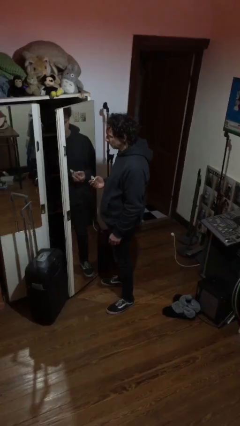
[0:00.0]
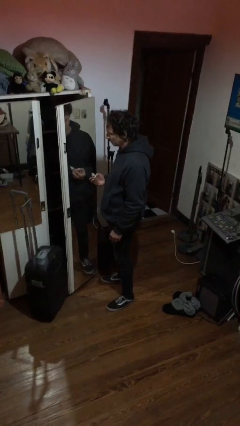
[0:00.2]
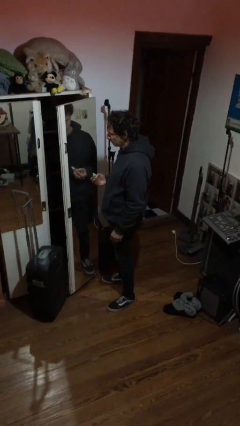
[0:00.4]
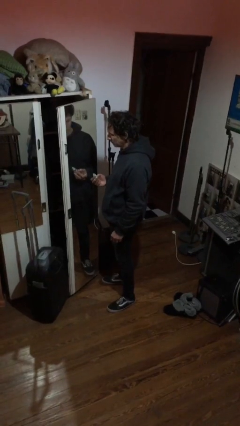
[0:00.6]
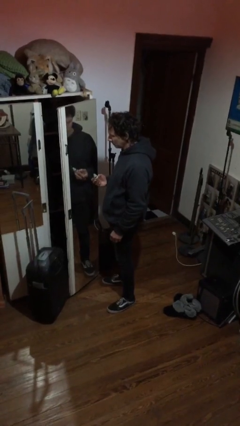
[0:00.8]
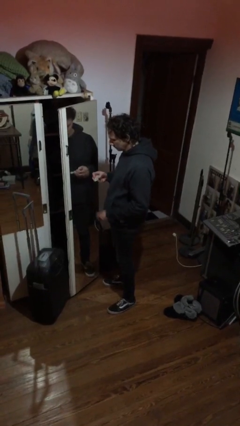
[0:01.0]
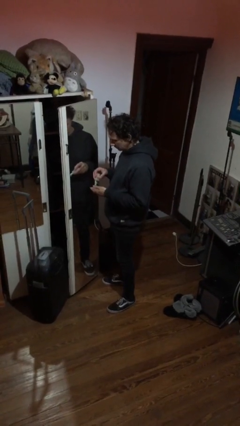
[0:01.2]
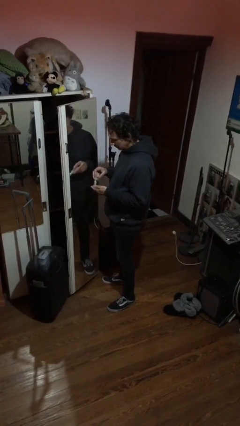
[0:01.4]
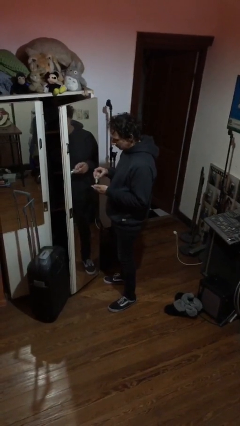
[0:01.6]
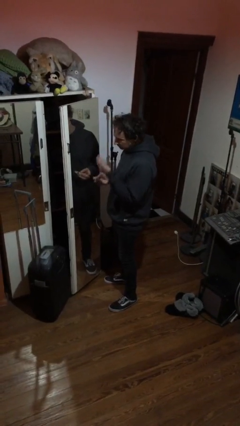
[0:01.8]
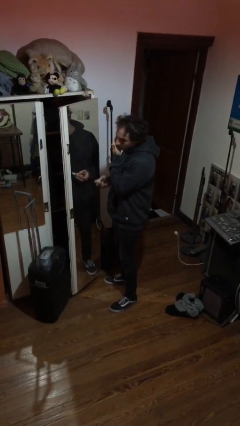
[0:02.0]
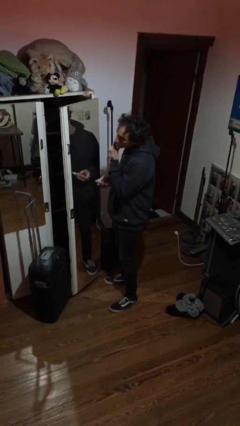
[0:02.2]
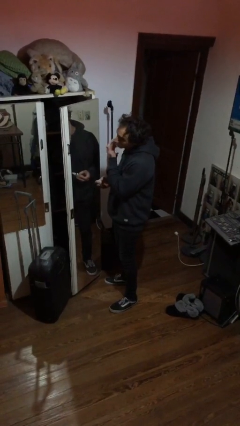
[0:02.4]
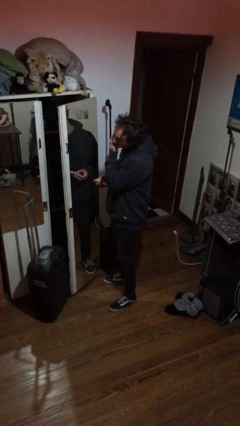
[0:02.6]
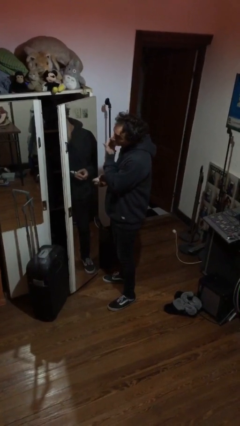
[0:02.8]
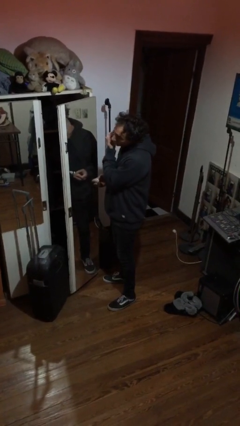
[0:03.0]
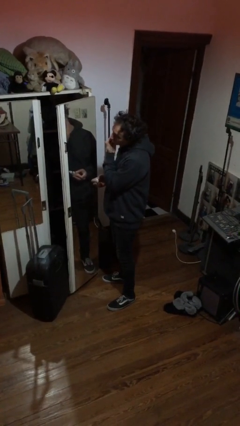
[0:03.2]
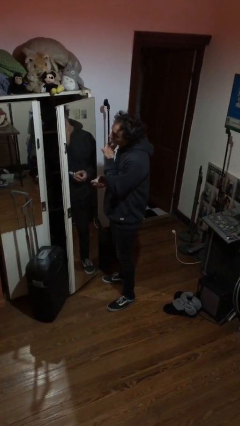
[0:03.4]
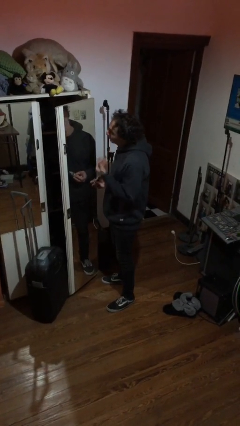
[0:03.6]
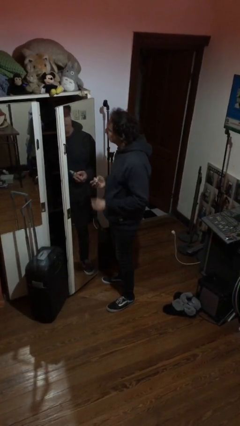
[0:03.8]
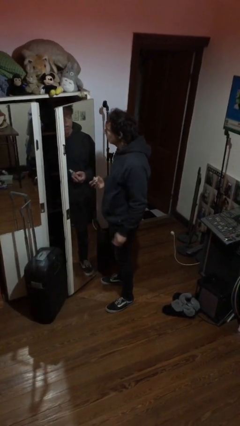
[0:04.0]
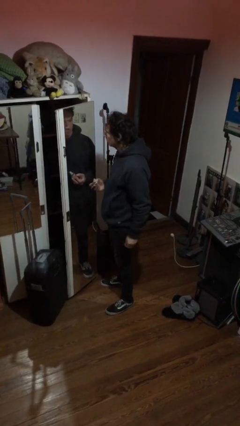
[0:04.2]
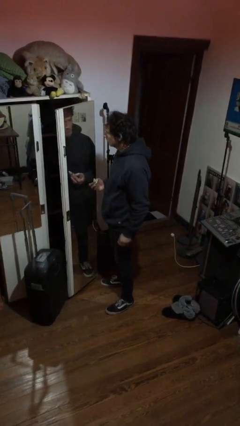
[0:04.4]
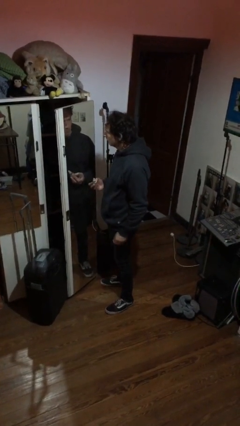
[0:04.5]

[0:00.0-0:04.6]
person applies foundation makeup

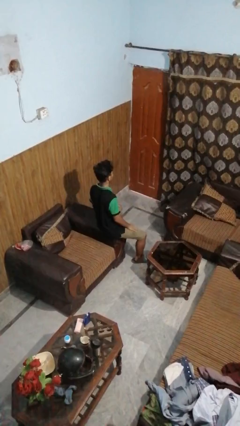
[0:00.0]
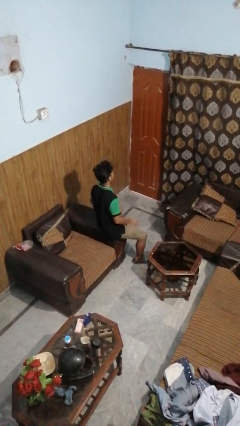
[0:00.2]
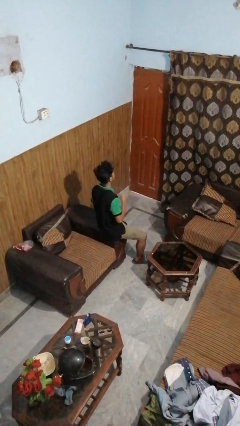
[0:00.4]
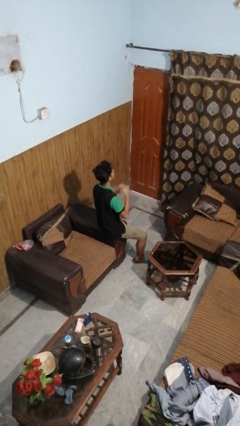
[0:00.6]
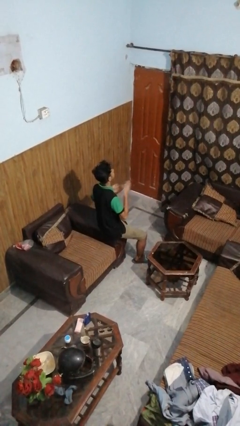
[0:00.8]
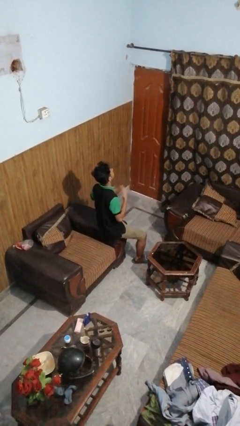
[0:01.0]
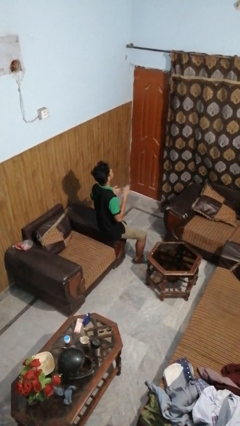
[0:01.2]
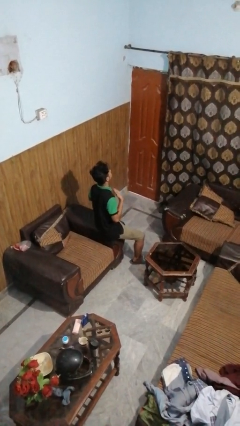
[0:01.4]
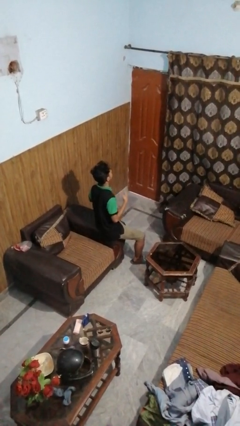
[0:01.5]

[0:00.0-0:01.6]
person drums on chest

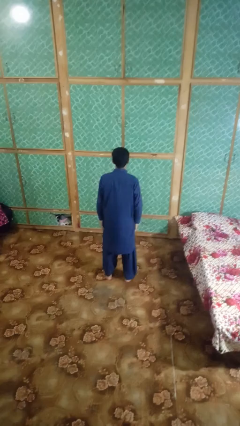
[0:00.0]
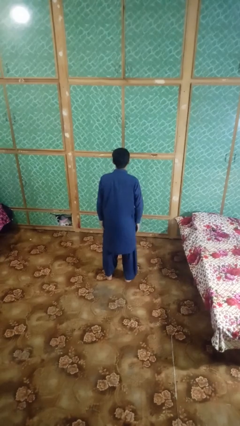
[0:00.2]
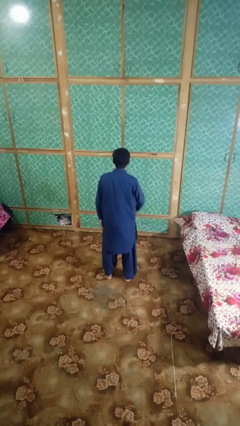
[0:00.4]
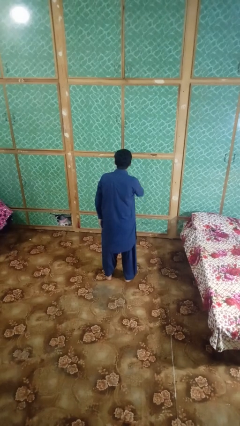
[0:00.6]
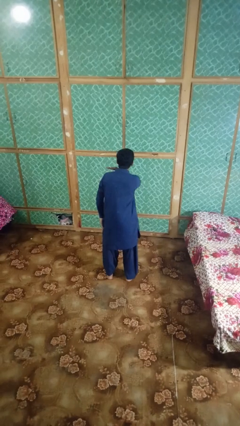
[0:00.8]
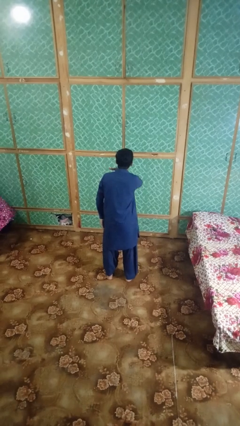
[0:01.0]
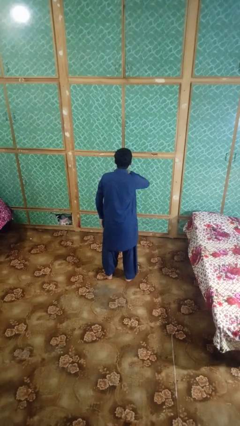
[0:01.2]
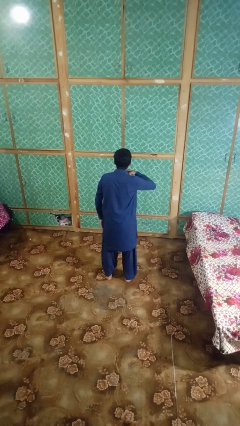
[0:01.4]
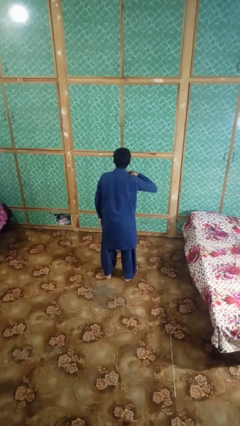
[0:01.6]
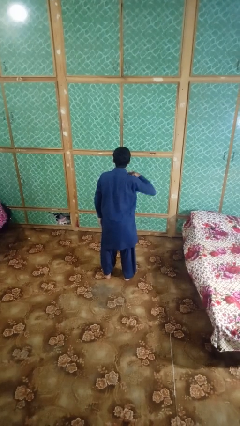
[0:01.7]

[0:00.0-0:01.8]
person gestures cut

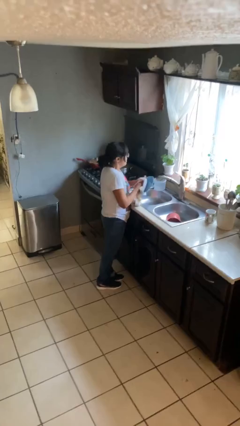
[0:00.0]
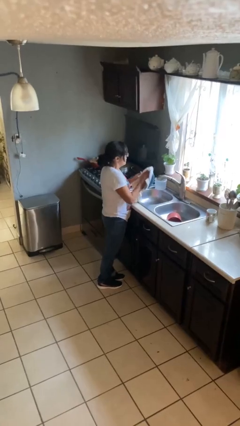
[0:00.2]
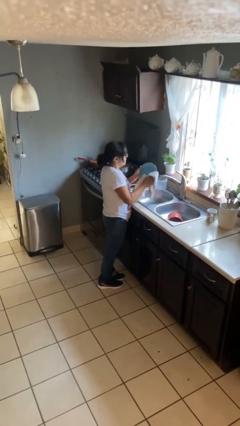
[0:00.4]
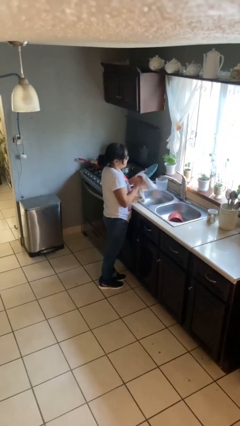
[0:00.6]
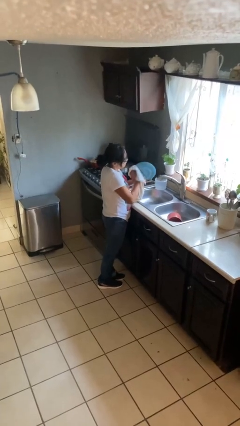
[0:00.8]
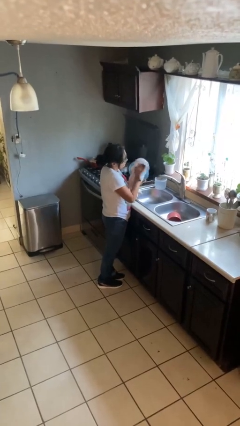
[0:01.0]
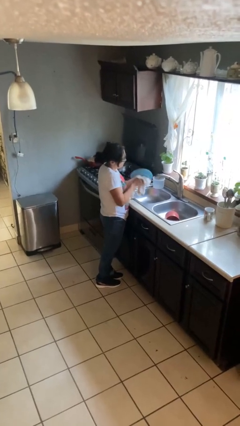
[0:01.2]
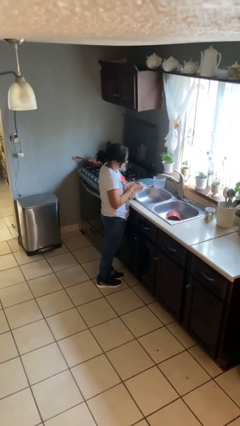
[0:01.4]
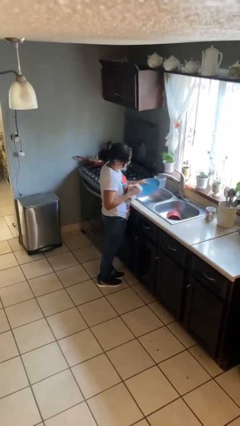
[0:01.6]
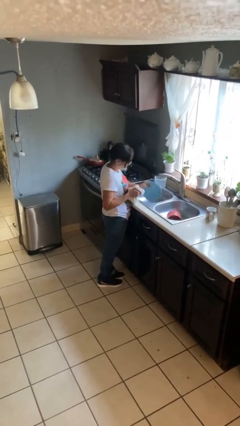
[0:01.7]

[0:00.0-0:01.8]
person dries dish

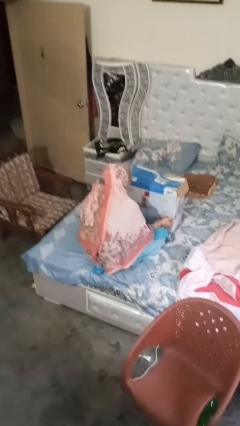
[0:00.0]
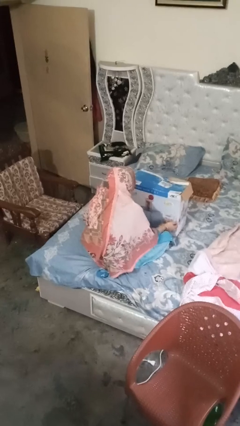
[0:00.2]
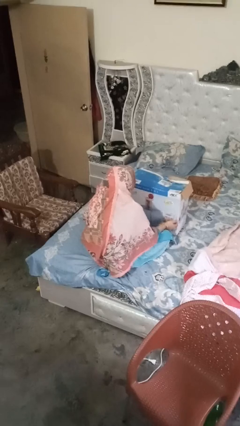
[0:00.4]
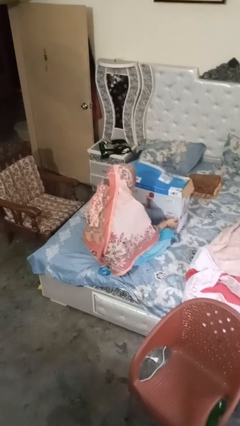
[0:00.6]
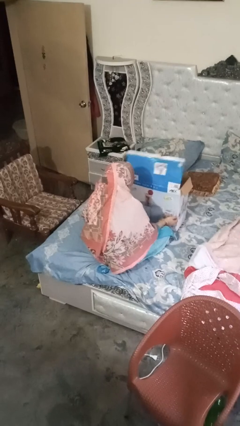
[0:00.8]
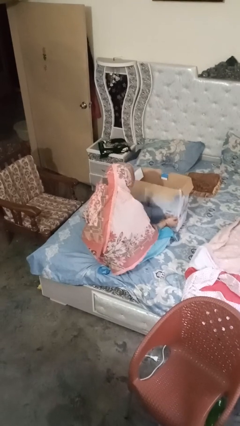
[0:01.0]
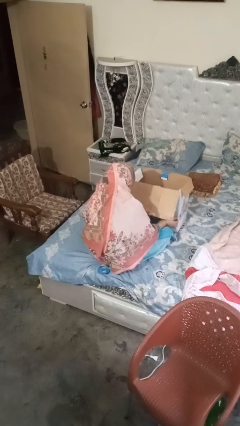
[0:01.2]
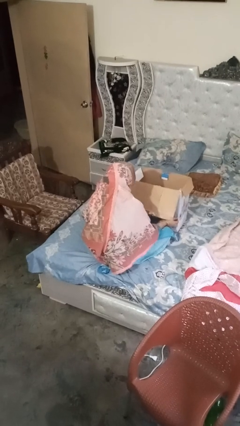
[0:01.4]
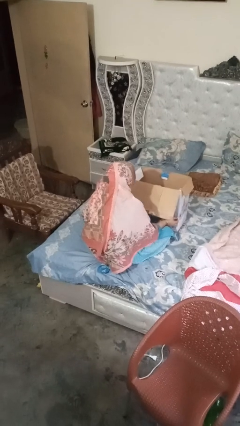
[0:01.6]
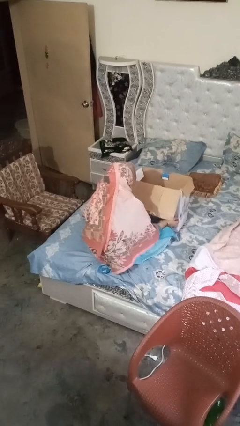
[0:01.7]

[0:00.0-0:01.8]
person opens box

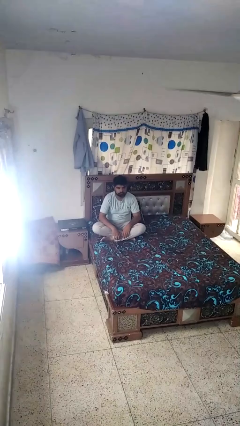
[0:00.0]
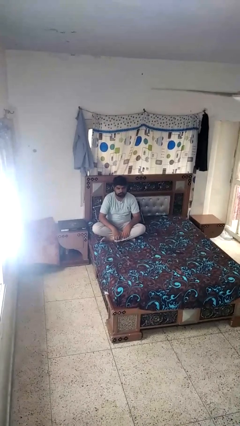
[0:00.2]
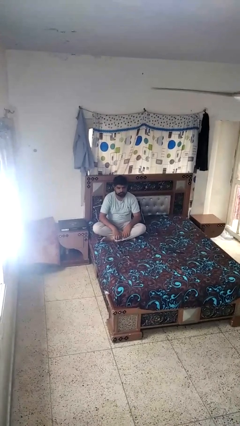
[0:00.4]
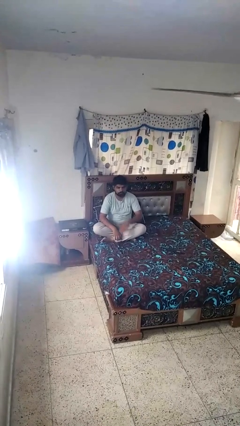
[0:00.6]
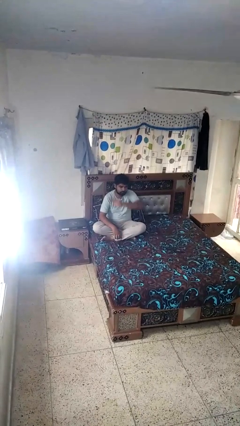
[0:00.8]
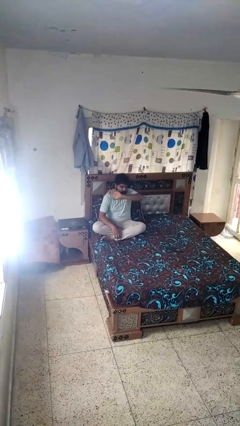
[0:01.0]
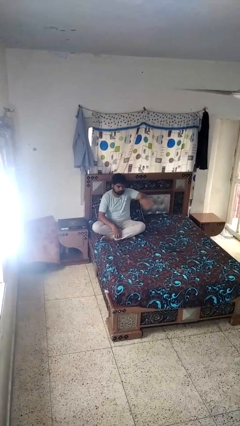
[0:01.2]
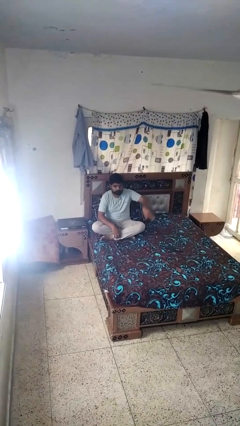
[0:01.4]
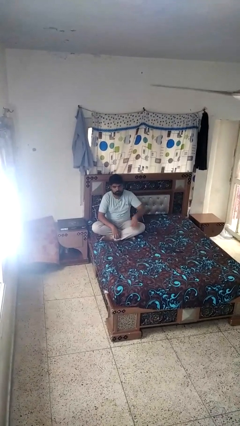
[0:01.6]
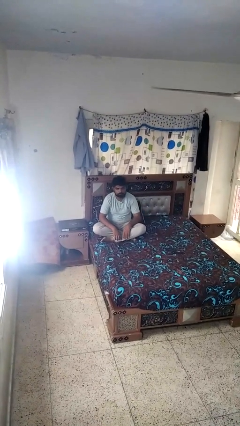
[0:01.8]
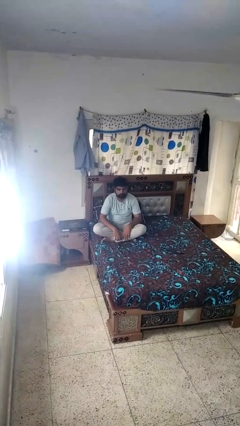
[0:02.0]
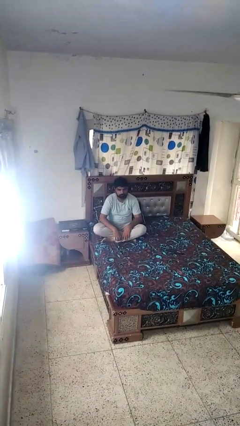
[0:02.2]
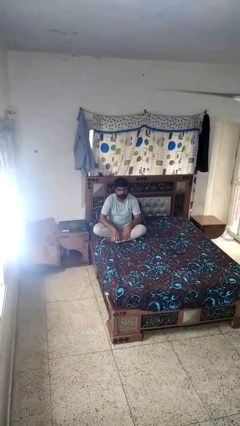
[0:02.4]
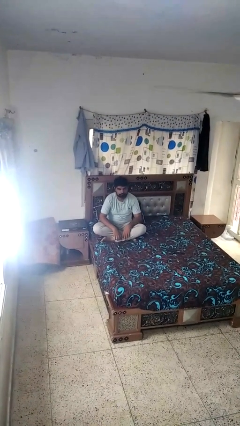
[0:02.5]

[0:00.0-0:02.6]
person gestures swipe left

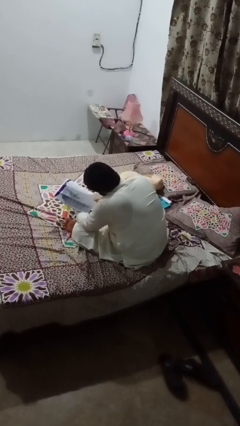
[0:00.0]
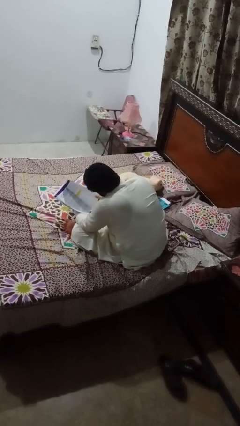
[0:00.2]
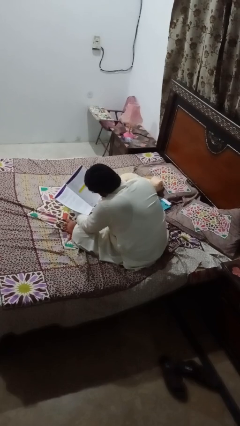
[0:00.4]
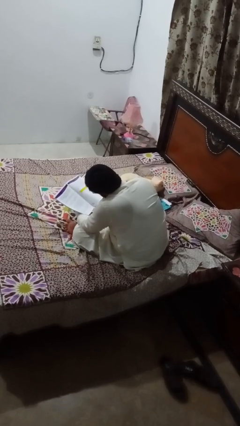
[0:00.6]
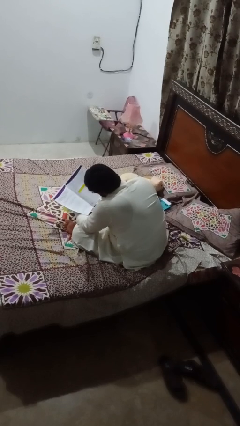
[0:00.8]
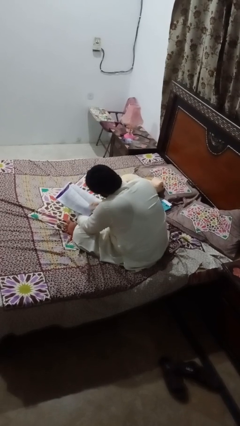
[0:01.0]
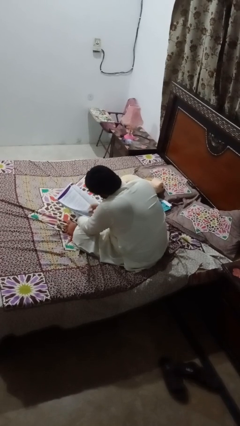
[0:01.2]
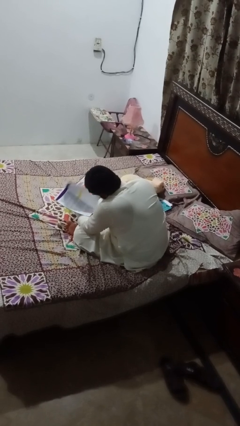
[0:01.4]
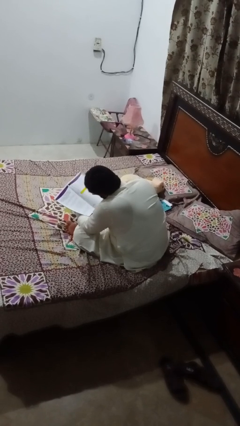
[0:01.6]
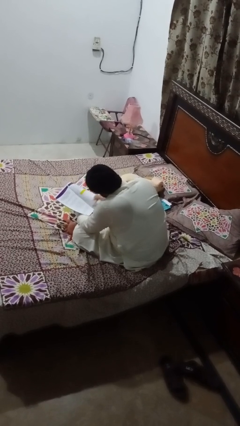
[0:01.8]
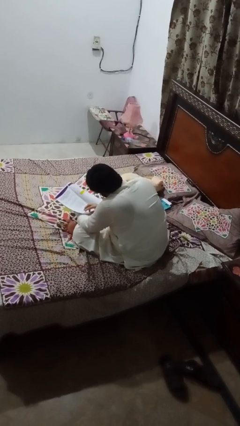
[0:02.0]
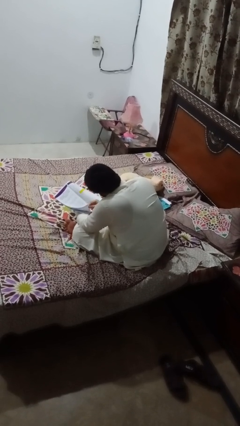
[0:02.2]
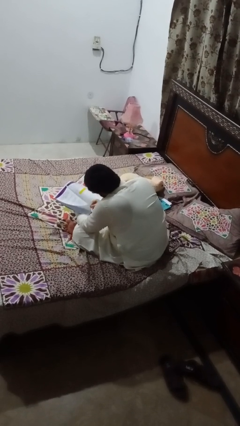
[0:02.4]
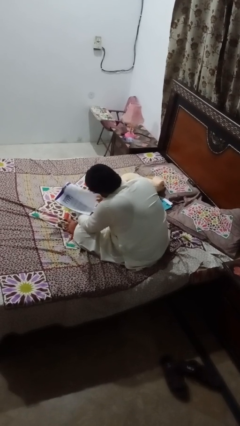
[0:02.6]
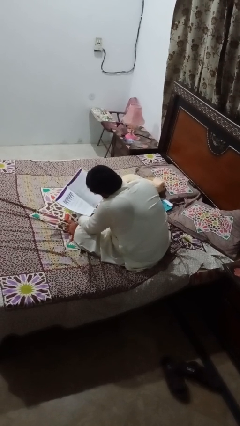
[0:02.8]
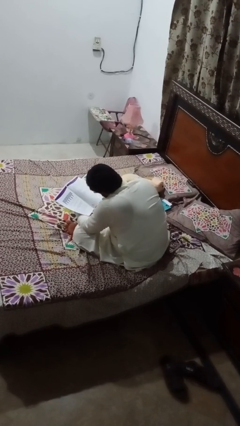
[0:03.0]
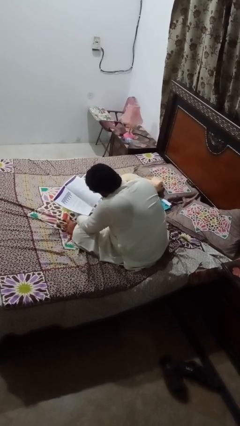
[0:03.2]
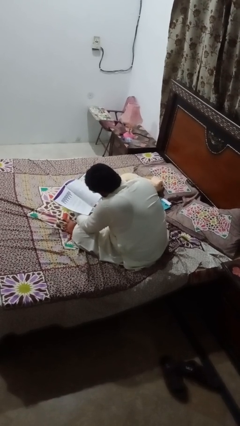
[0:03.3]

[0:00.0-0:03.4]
person reads book
